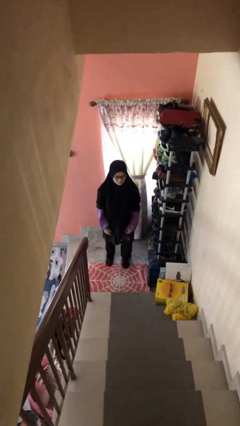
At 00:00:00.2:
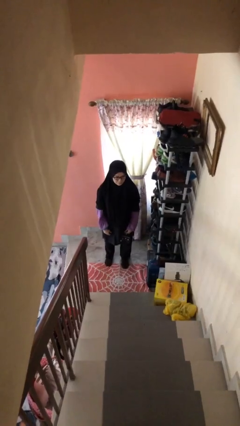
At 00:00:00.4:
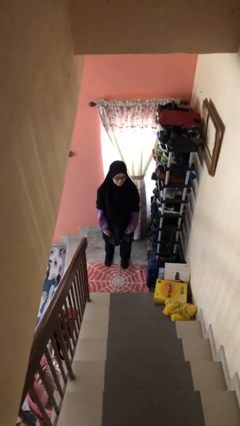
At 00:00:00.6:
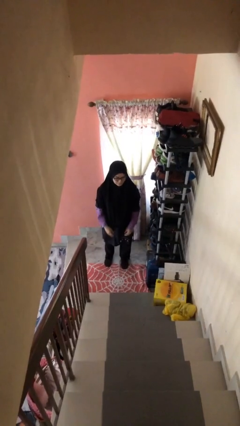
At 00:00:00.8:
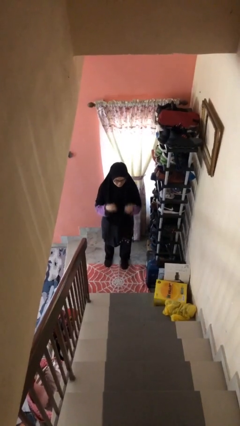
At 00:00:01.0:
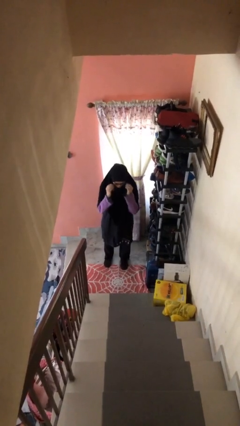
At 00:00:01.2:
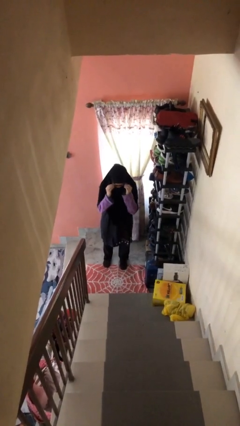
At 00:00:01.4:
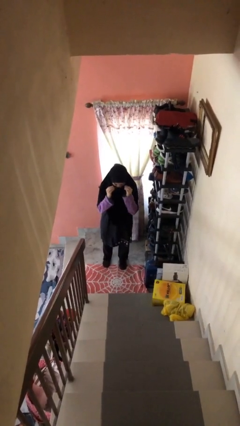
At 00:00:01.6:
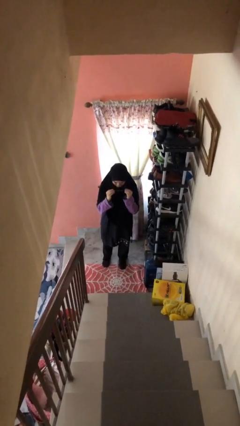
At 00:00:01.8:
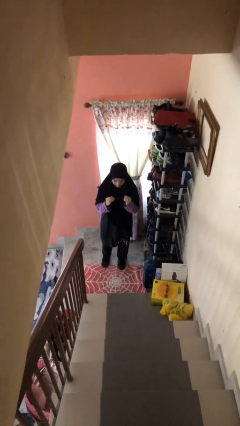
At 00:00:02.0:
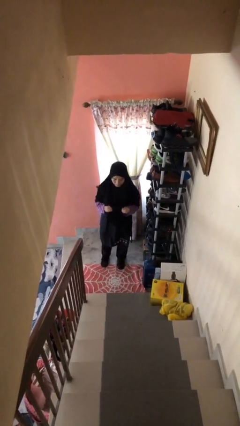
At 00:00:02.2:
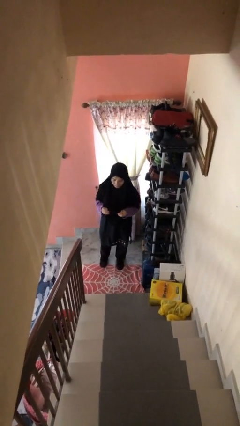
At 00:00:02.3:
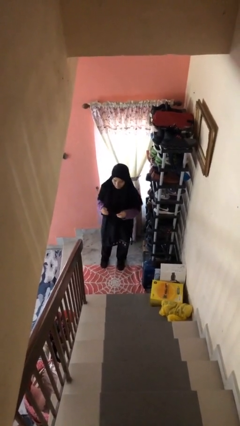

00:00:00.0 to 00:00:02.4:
person takes off glasses

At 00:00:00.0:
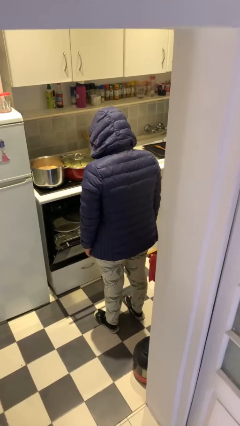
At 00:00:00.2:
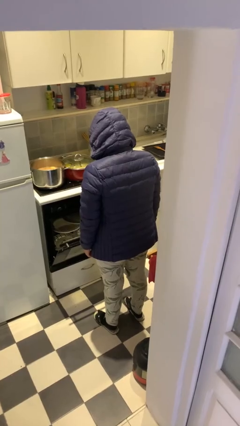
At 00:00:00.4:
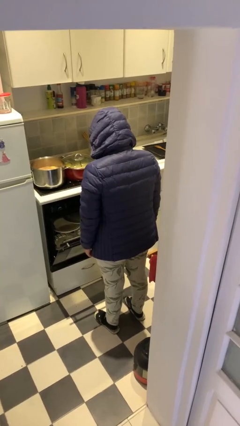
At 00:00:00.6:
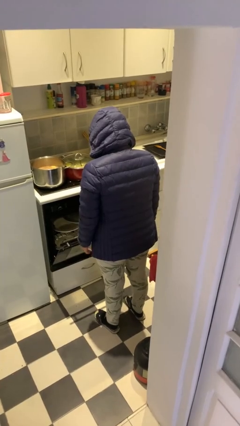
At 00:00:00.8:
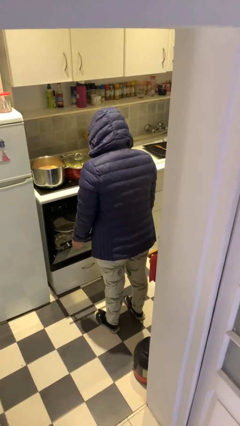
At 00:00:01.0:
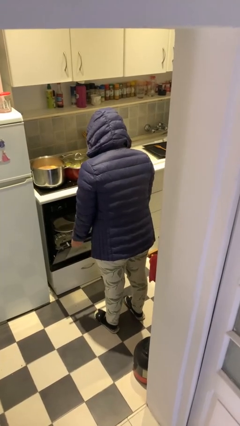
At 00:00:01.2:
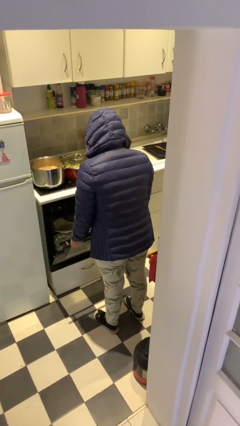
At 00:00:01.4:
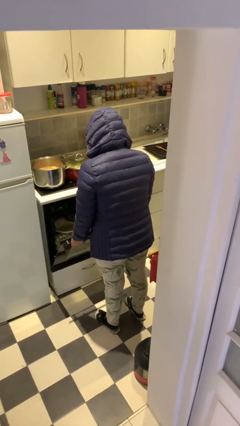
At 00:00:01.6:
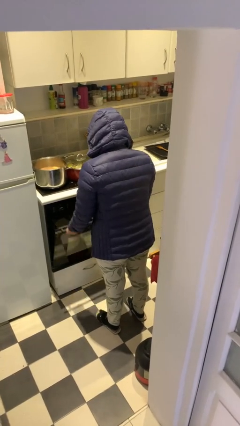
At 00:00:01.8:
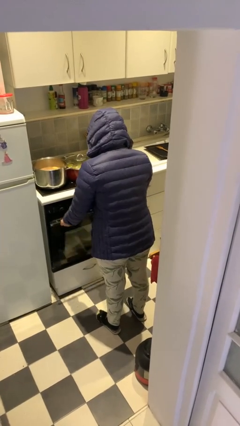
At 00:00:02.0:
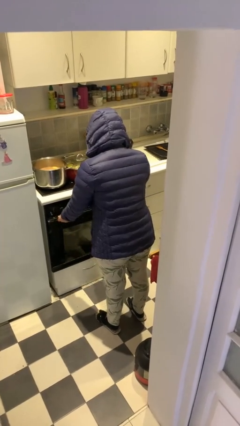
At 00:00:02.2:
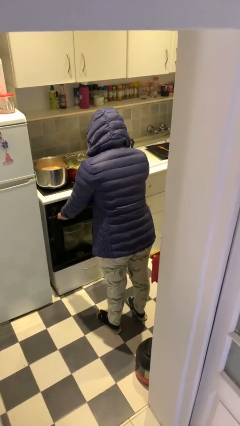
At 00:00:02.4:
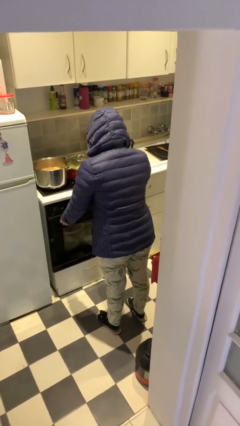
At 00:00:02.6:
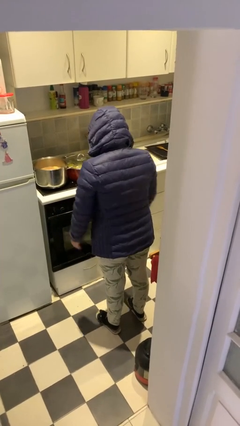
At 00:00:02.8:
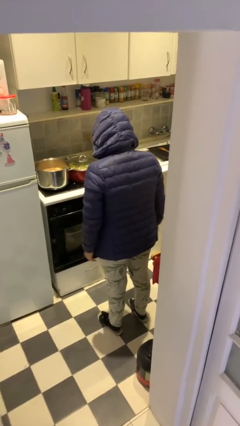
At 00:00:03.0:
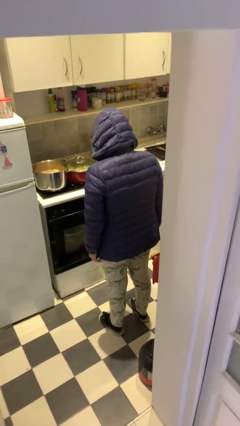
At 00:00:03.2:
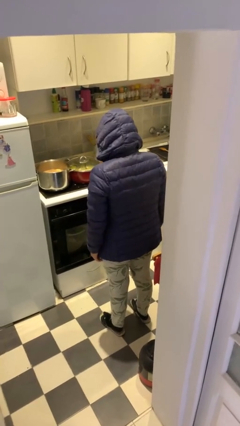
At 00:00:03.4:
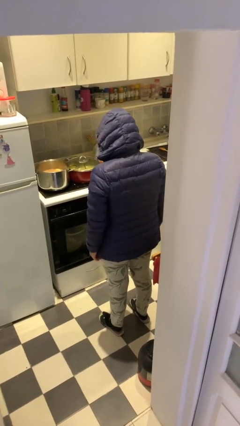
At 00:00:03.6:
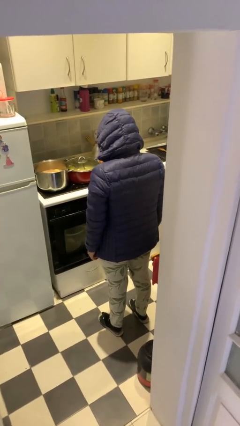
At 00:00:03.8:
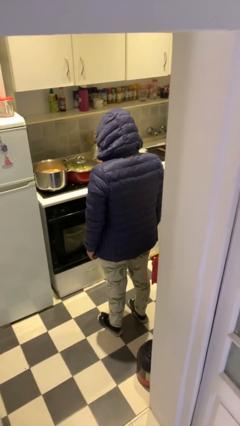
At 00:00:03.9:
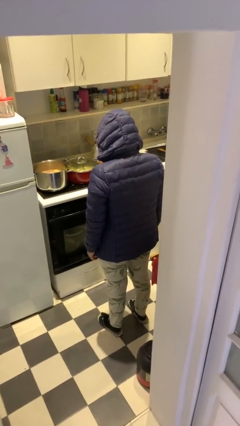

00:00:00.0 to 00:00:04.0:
person closes dishwasher

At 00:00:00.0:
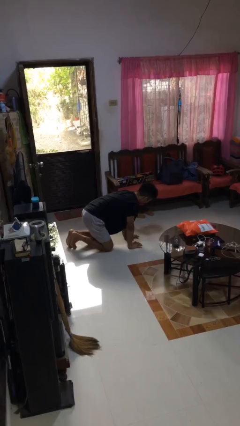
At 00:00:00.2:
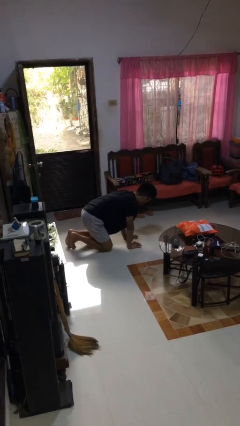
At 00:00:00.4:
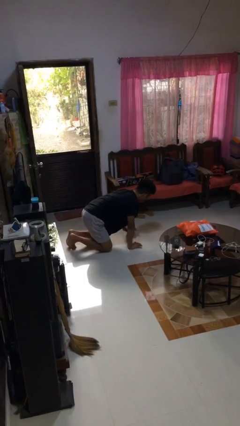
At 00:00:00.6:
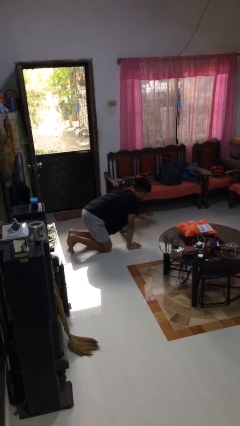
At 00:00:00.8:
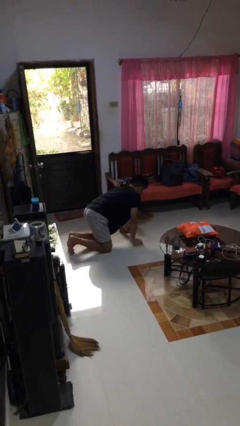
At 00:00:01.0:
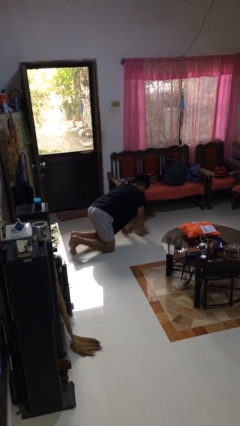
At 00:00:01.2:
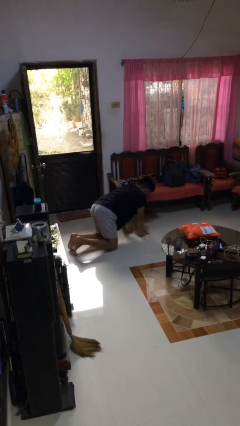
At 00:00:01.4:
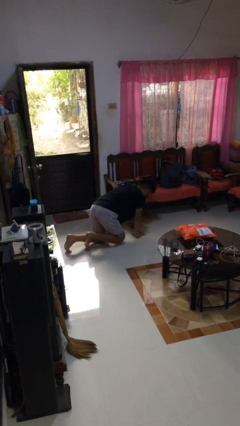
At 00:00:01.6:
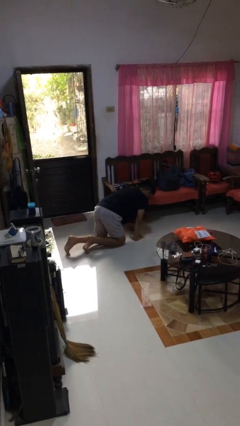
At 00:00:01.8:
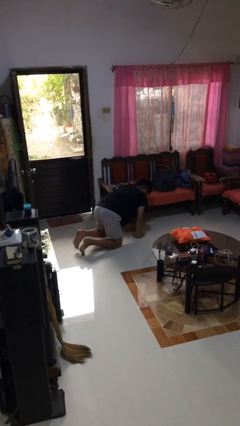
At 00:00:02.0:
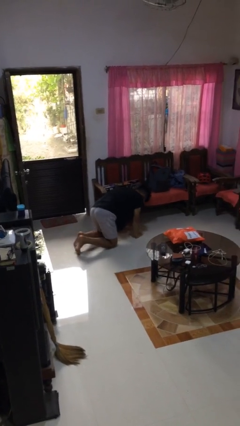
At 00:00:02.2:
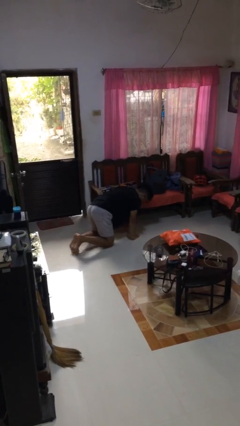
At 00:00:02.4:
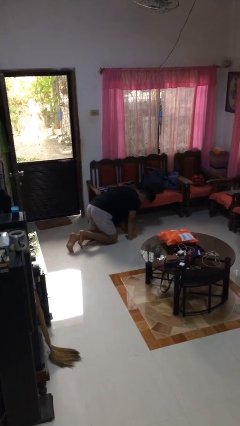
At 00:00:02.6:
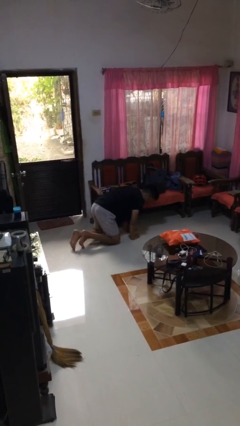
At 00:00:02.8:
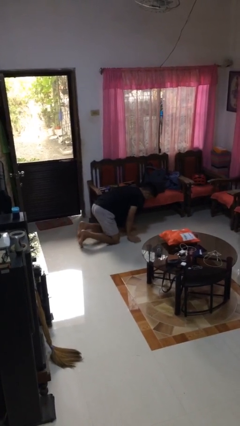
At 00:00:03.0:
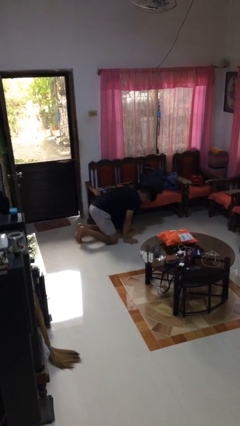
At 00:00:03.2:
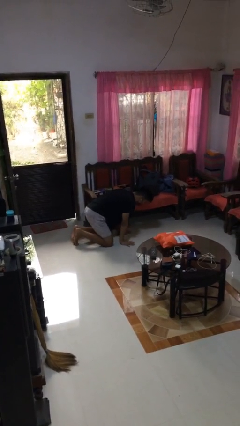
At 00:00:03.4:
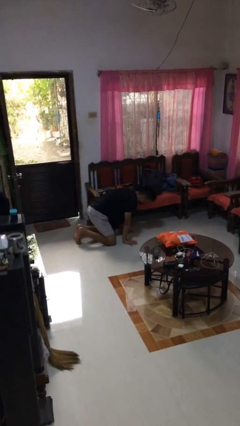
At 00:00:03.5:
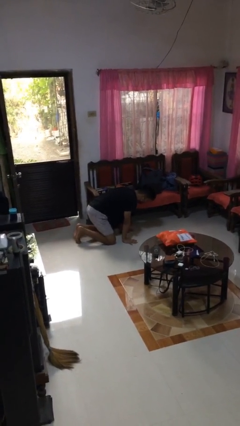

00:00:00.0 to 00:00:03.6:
person crawls

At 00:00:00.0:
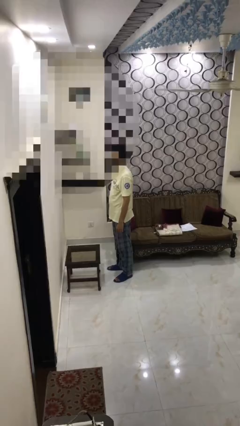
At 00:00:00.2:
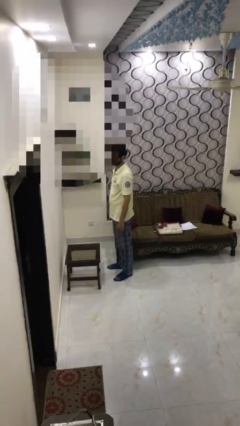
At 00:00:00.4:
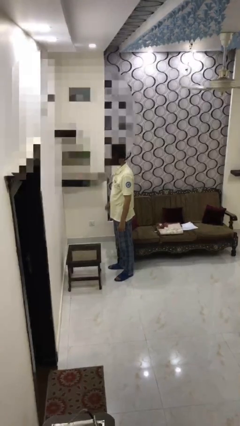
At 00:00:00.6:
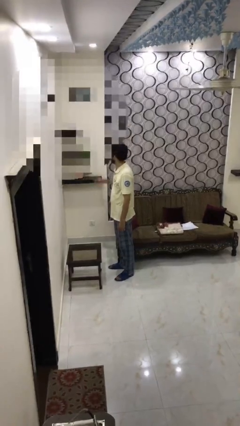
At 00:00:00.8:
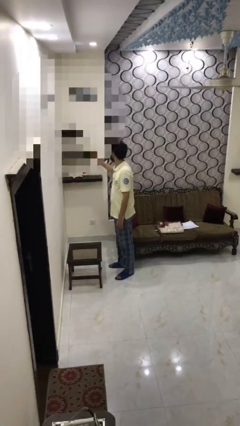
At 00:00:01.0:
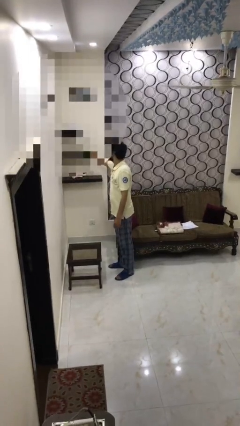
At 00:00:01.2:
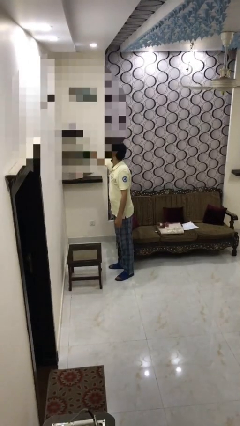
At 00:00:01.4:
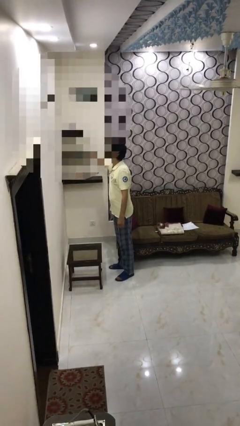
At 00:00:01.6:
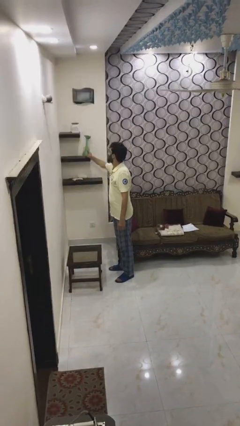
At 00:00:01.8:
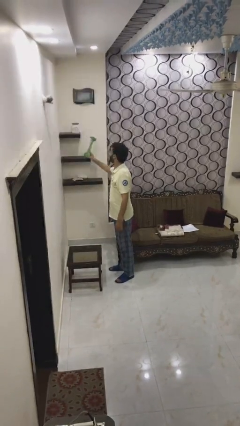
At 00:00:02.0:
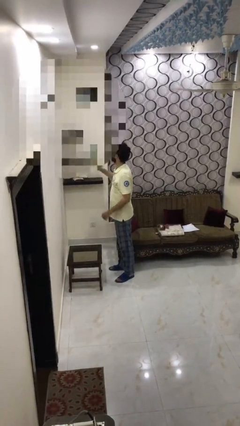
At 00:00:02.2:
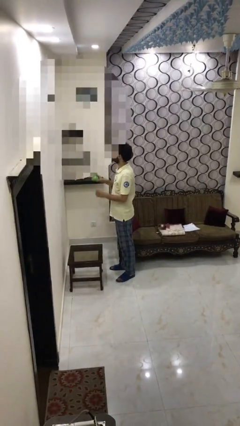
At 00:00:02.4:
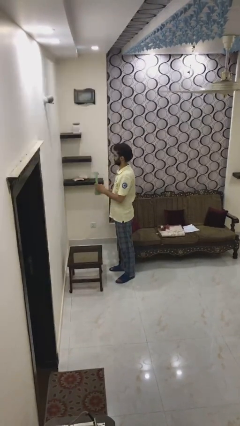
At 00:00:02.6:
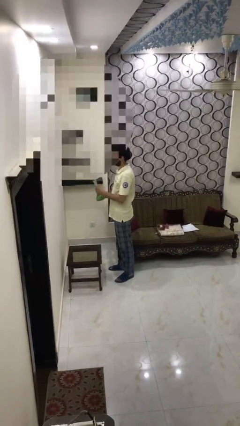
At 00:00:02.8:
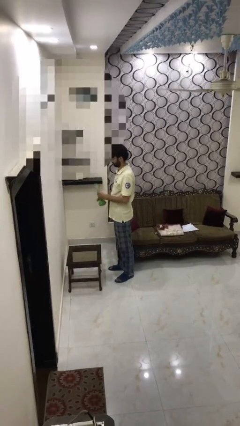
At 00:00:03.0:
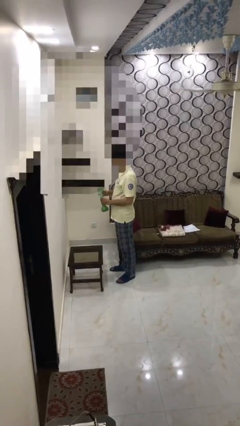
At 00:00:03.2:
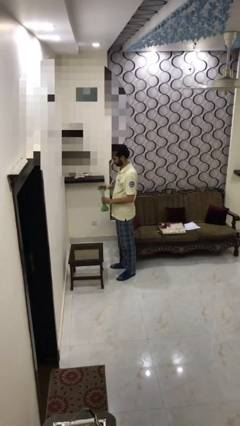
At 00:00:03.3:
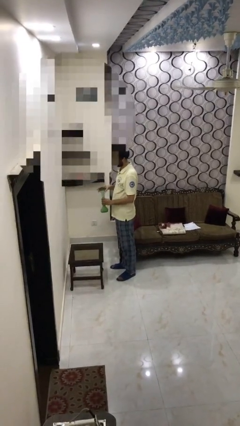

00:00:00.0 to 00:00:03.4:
person picks up object from shelf

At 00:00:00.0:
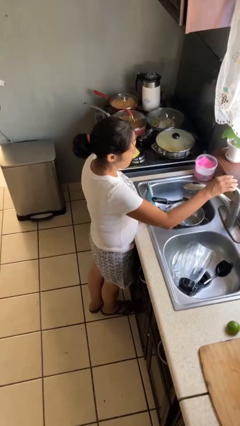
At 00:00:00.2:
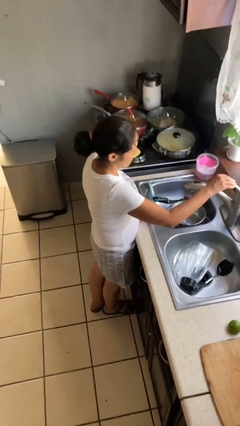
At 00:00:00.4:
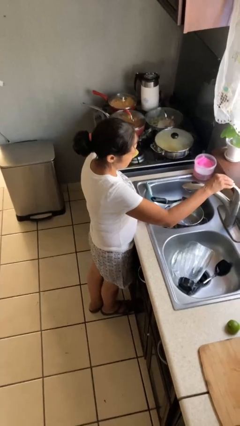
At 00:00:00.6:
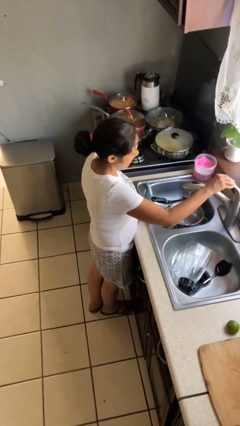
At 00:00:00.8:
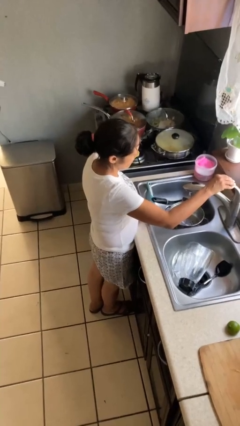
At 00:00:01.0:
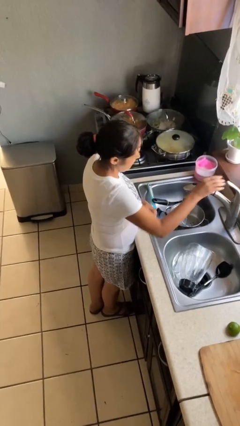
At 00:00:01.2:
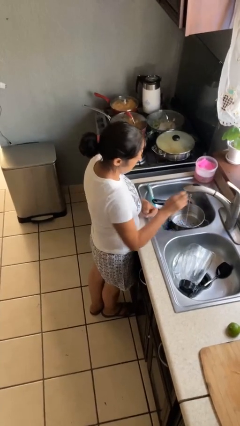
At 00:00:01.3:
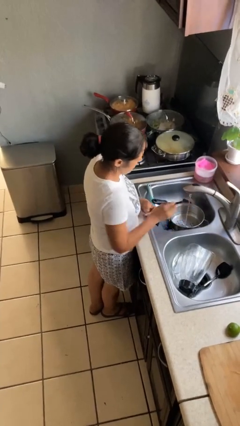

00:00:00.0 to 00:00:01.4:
person turns on faucet

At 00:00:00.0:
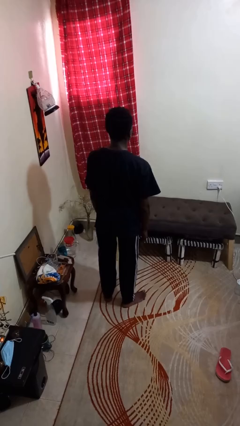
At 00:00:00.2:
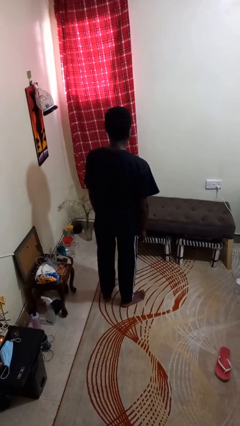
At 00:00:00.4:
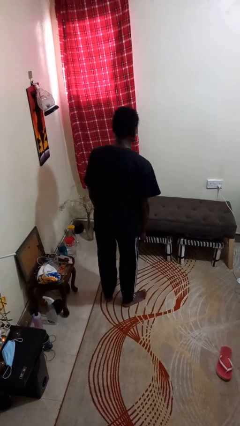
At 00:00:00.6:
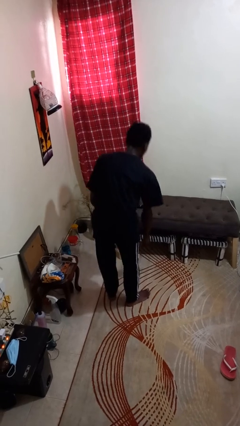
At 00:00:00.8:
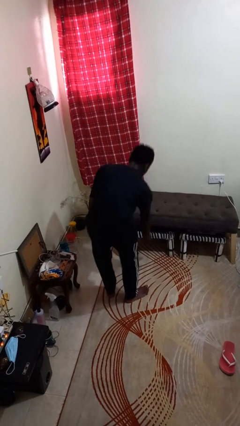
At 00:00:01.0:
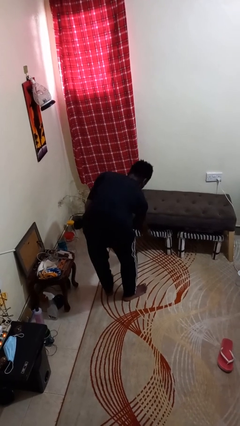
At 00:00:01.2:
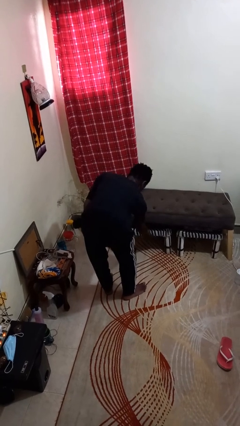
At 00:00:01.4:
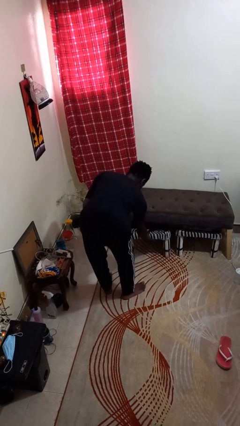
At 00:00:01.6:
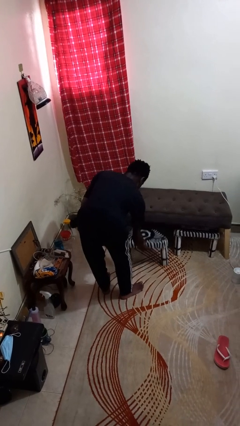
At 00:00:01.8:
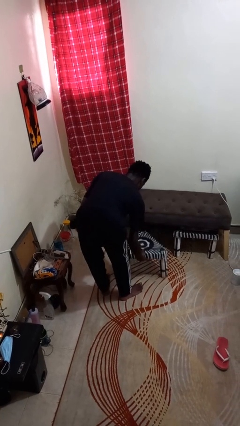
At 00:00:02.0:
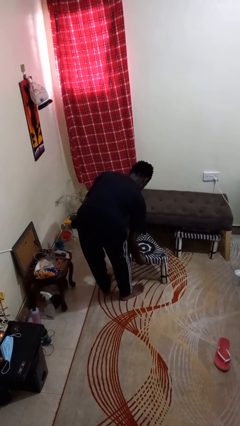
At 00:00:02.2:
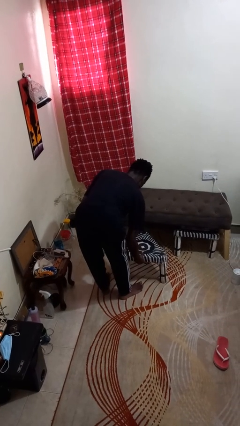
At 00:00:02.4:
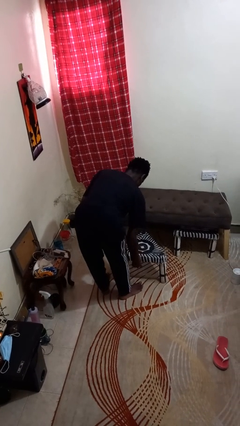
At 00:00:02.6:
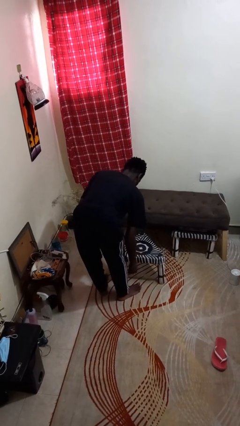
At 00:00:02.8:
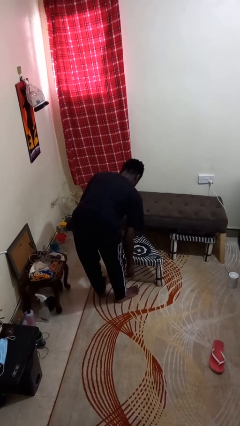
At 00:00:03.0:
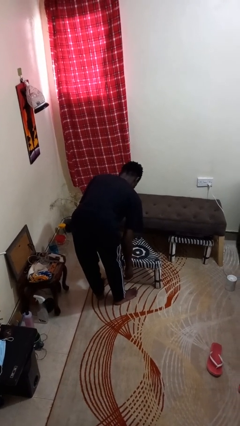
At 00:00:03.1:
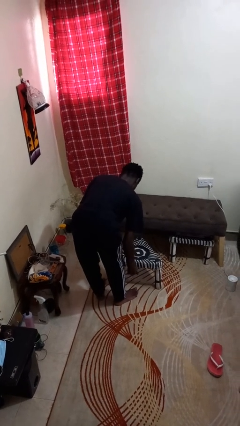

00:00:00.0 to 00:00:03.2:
person pulls out chair
